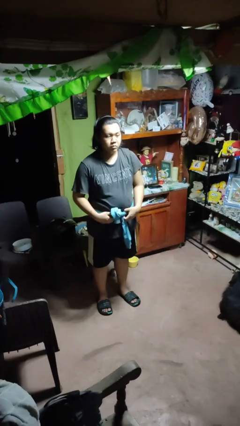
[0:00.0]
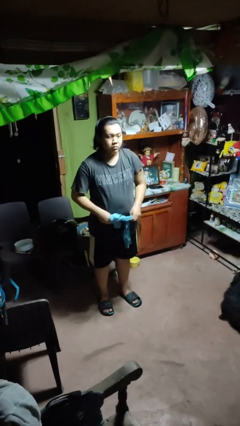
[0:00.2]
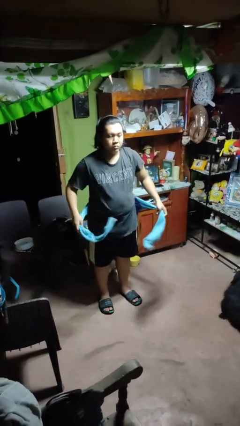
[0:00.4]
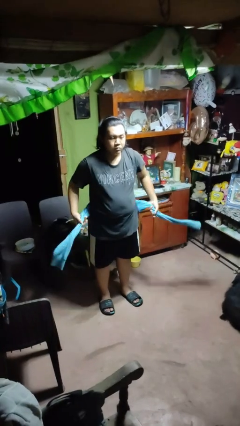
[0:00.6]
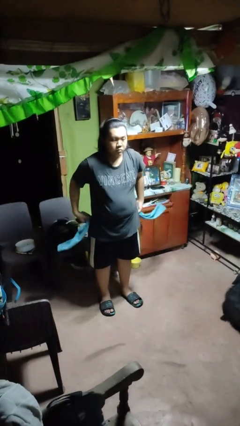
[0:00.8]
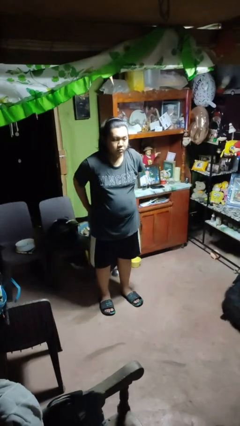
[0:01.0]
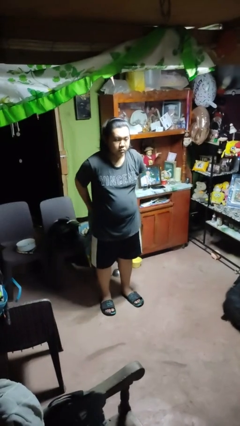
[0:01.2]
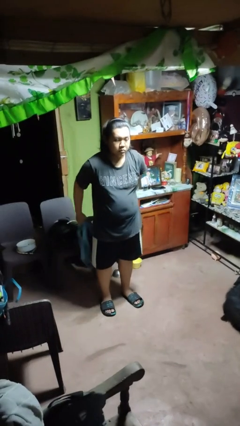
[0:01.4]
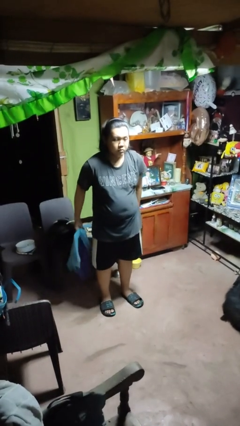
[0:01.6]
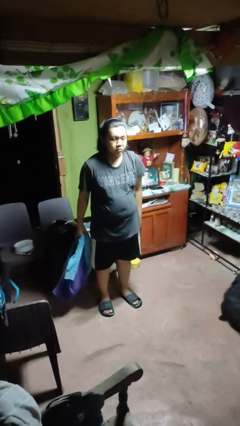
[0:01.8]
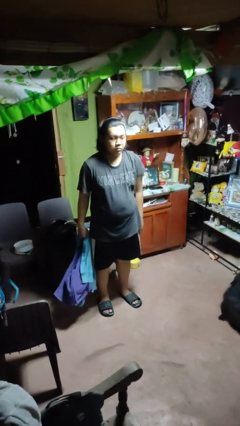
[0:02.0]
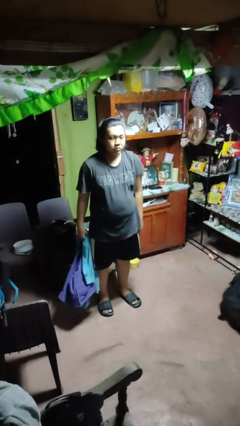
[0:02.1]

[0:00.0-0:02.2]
person unties jacket around waist

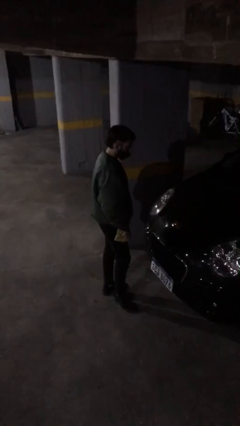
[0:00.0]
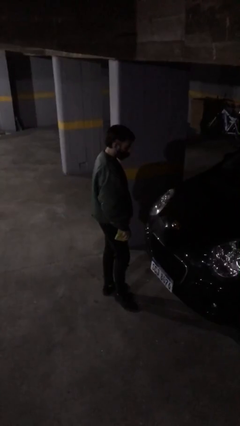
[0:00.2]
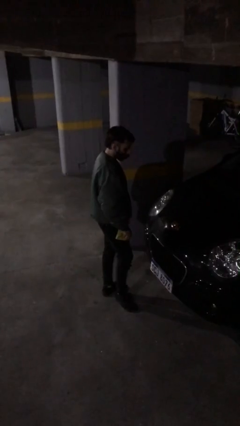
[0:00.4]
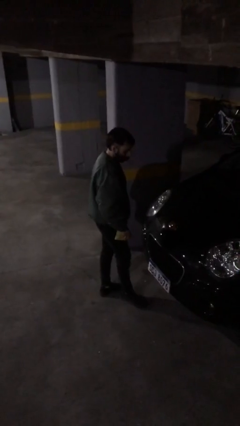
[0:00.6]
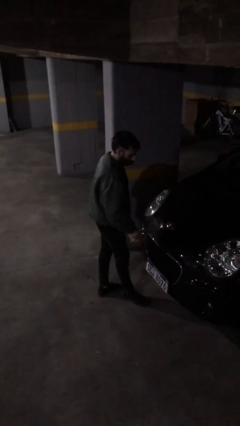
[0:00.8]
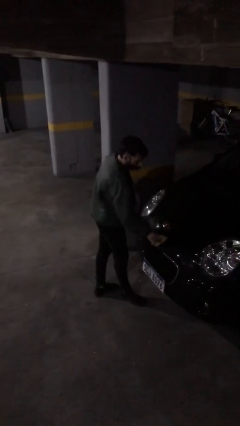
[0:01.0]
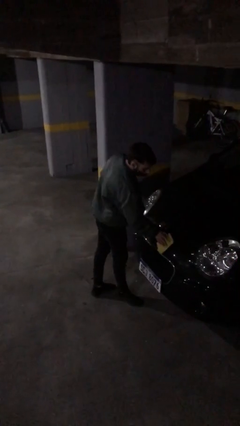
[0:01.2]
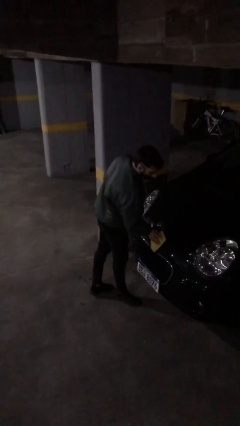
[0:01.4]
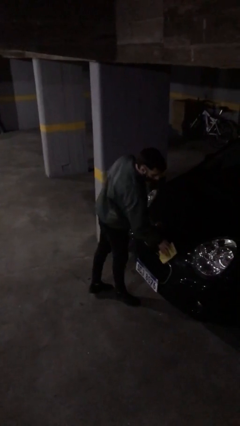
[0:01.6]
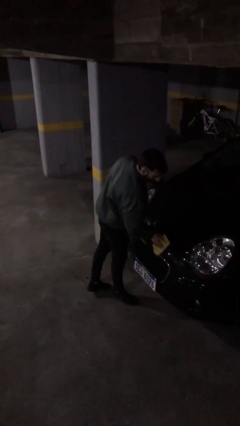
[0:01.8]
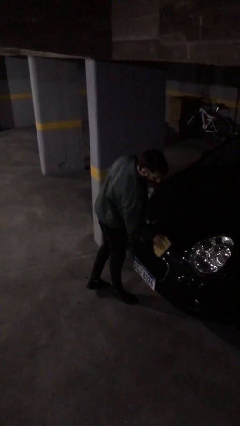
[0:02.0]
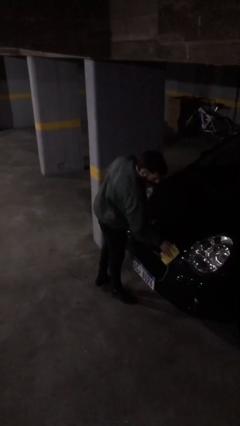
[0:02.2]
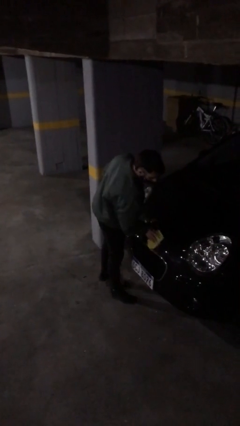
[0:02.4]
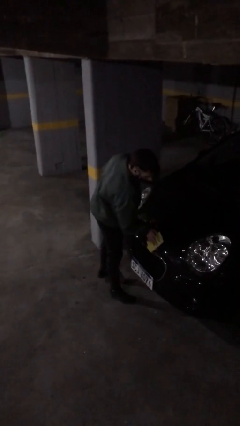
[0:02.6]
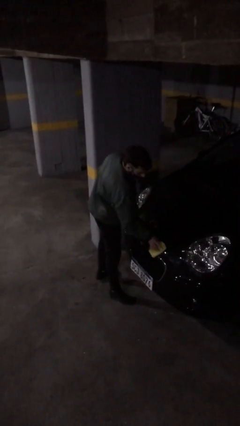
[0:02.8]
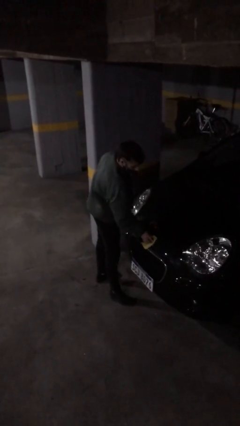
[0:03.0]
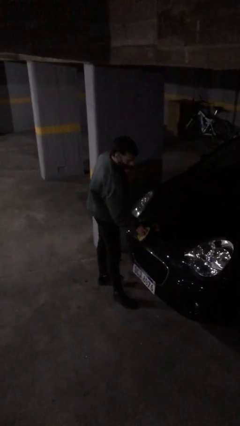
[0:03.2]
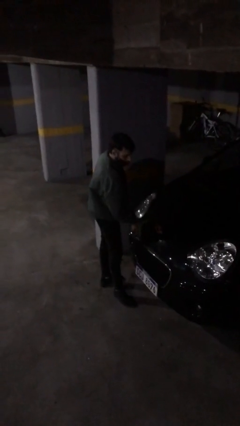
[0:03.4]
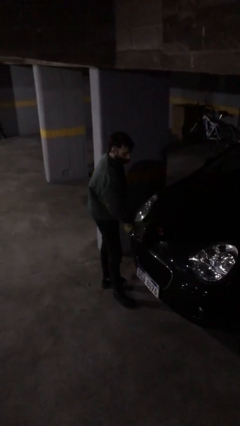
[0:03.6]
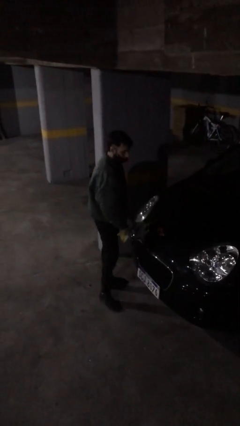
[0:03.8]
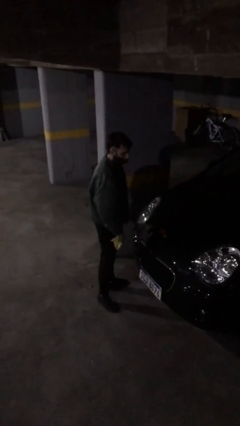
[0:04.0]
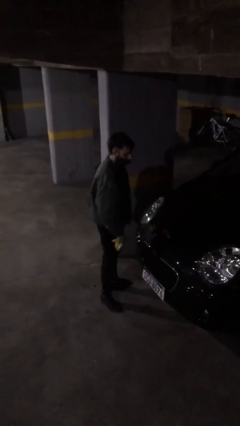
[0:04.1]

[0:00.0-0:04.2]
person polishes car with rag

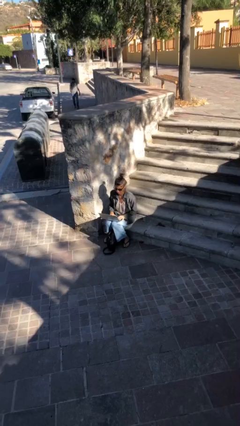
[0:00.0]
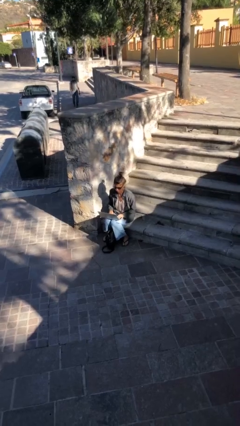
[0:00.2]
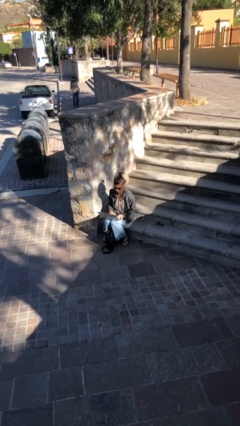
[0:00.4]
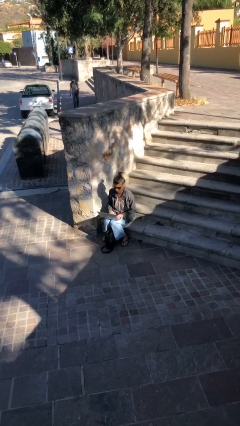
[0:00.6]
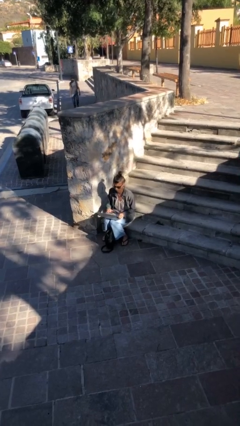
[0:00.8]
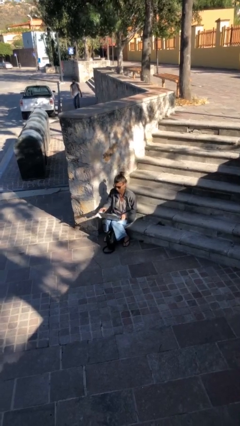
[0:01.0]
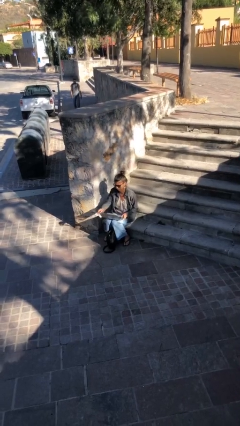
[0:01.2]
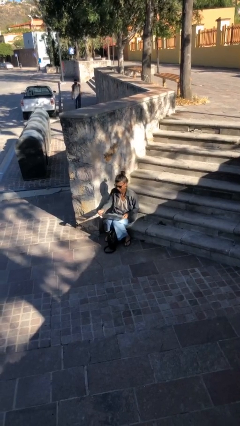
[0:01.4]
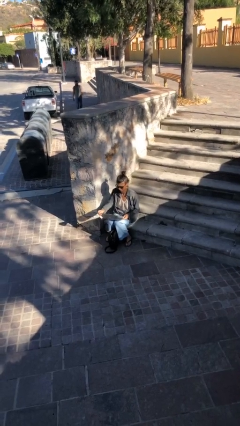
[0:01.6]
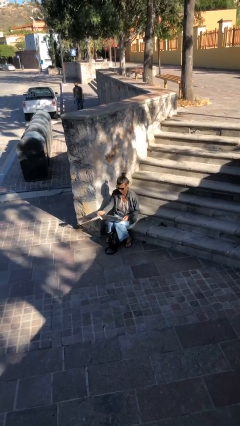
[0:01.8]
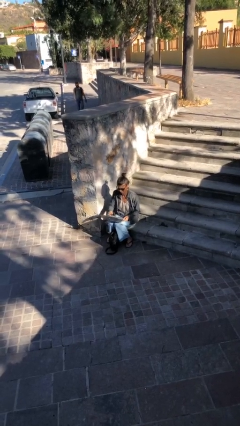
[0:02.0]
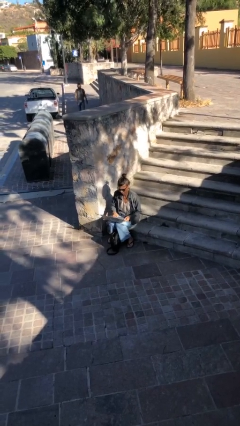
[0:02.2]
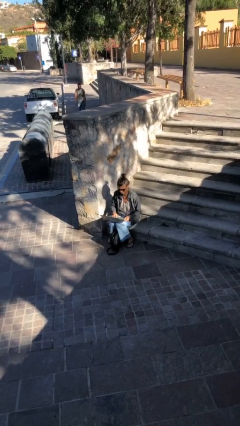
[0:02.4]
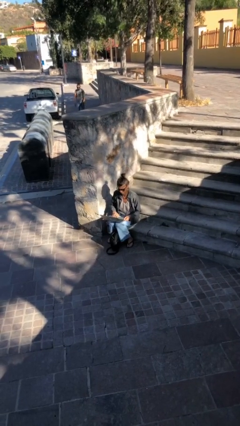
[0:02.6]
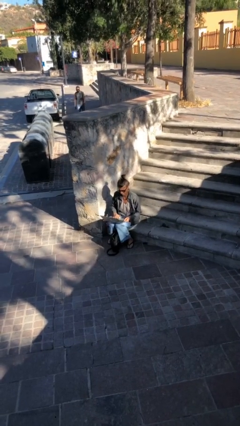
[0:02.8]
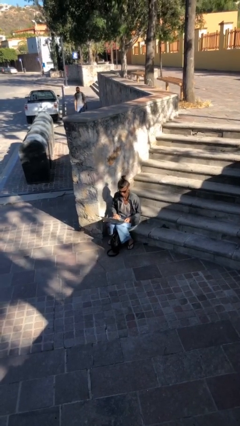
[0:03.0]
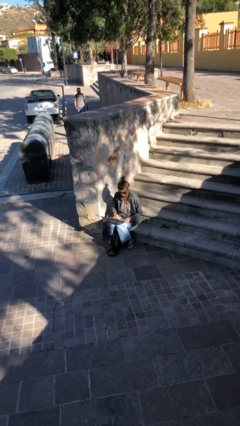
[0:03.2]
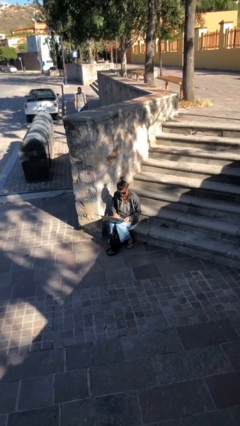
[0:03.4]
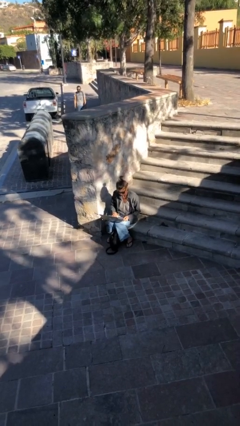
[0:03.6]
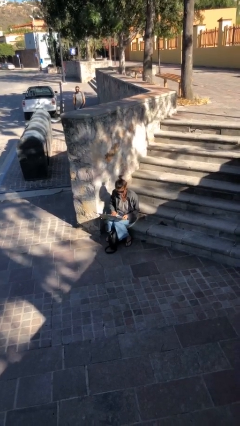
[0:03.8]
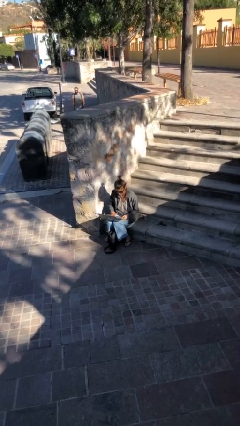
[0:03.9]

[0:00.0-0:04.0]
person interacts with laptop

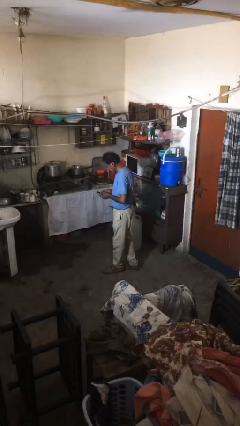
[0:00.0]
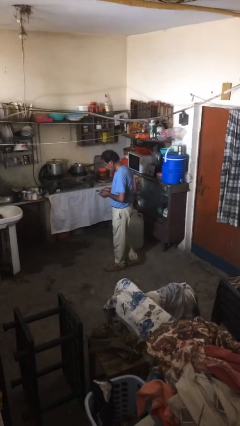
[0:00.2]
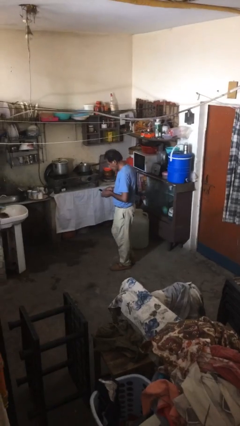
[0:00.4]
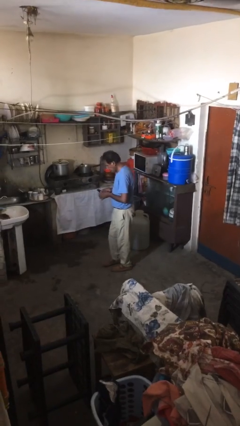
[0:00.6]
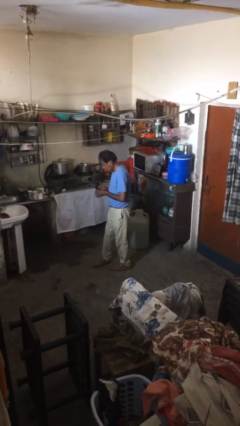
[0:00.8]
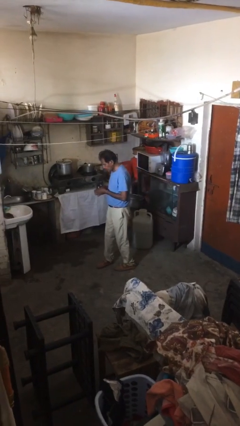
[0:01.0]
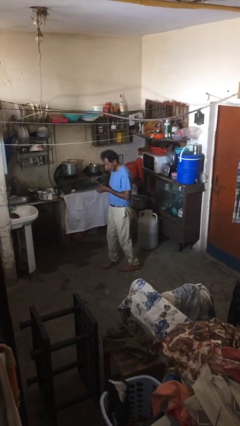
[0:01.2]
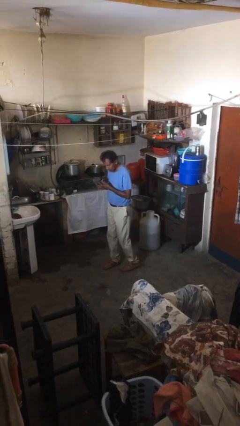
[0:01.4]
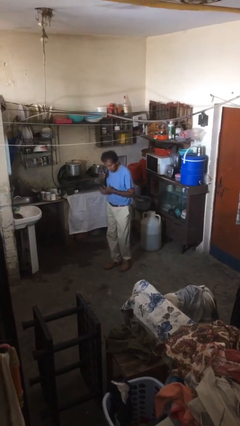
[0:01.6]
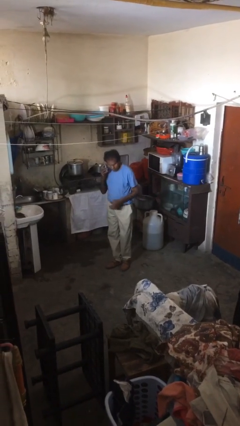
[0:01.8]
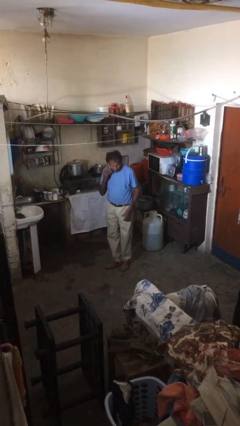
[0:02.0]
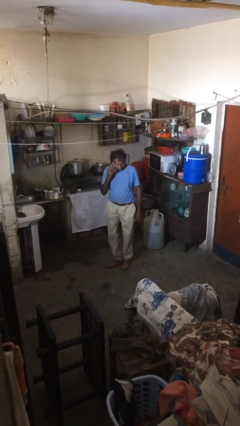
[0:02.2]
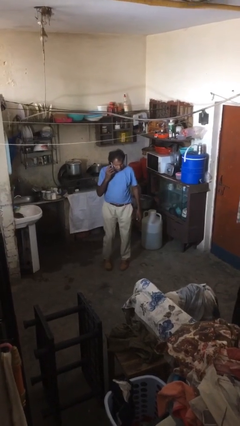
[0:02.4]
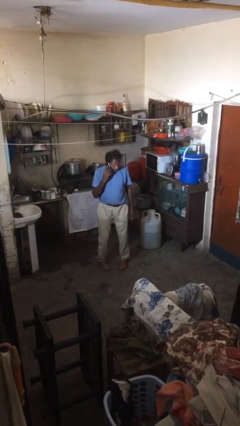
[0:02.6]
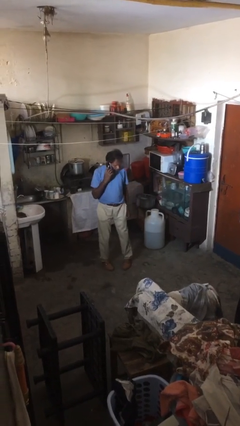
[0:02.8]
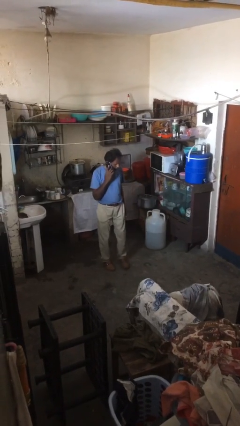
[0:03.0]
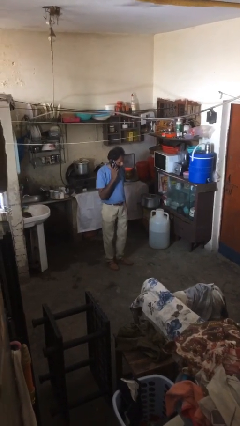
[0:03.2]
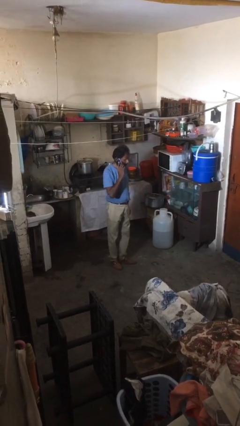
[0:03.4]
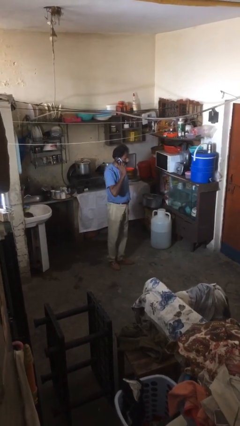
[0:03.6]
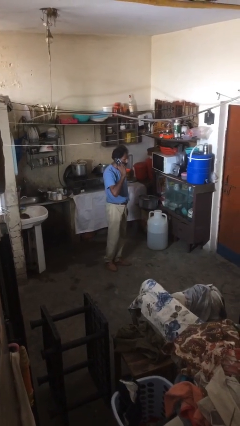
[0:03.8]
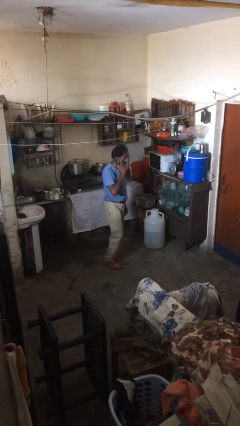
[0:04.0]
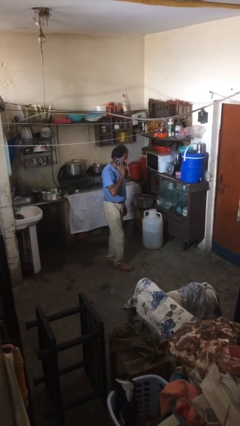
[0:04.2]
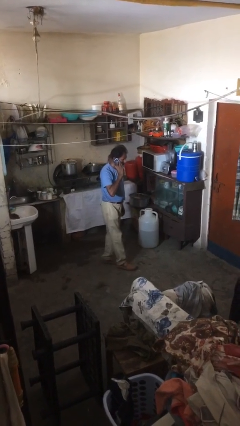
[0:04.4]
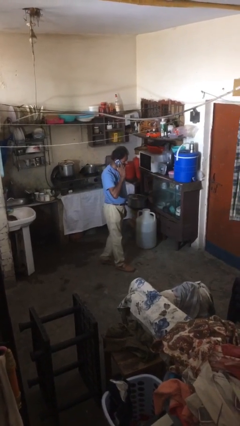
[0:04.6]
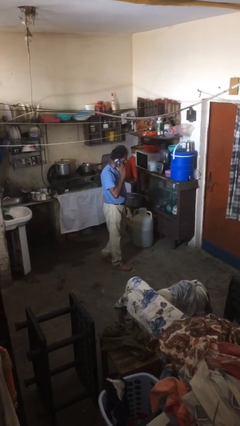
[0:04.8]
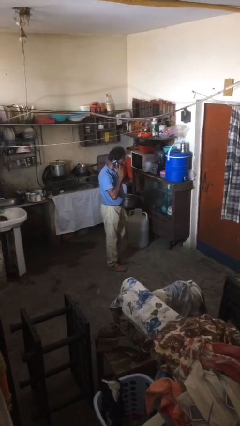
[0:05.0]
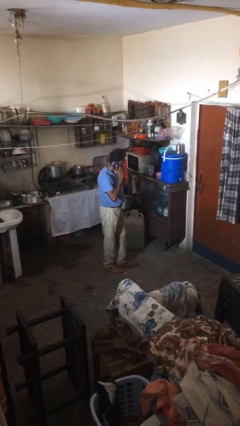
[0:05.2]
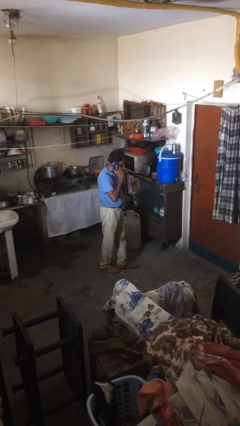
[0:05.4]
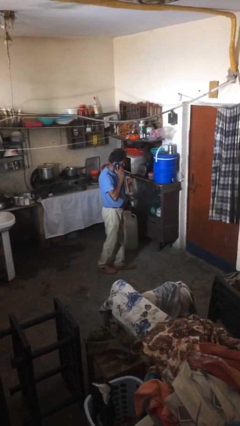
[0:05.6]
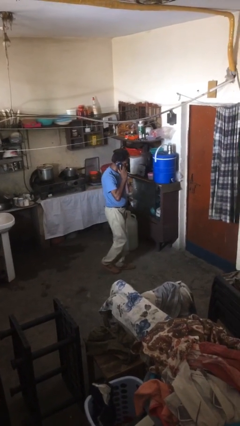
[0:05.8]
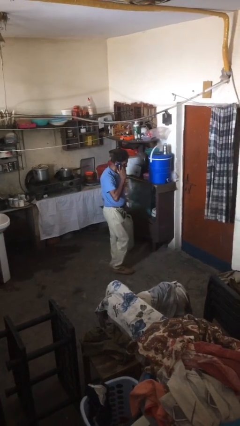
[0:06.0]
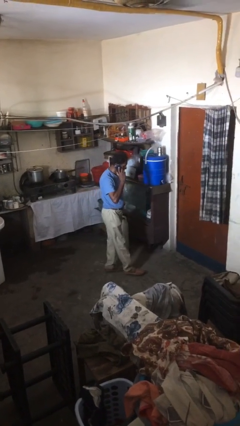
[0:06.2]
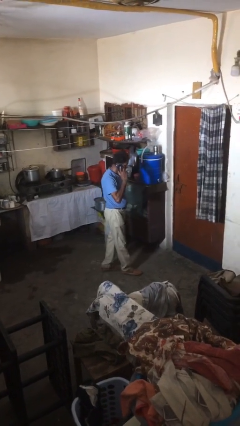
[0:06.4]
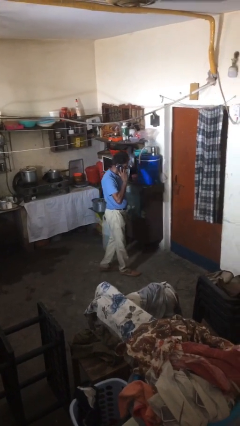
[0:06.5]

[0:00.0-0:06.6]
person talks on phone

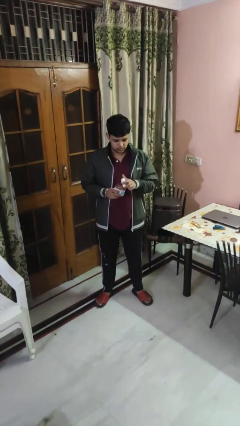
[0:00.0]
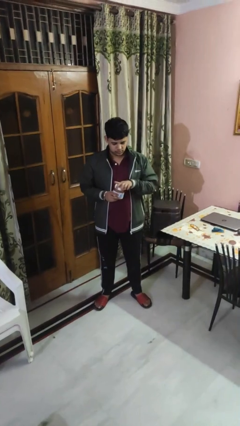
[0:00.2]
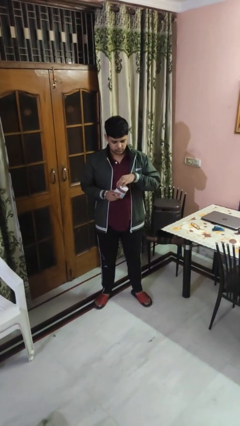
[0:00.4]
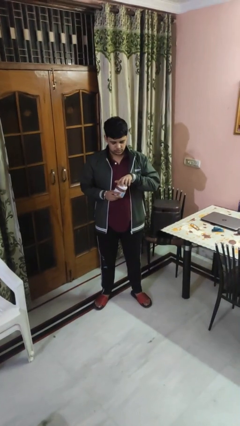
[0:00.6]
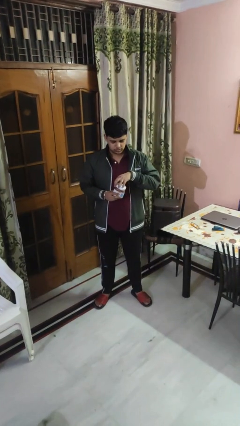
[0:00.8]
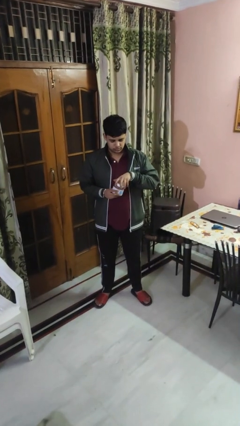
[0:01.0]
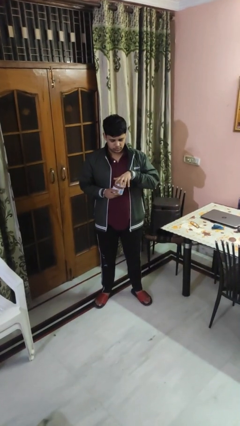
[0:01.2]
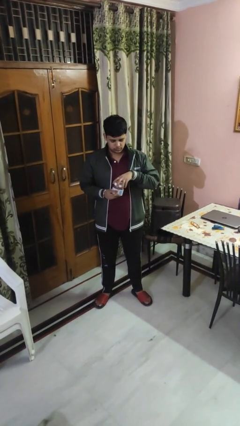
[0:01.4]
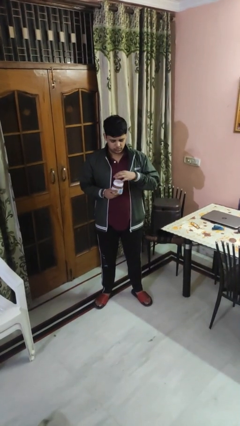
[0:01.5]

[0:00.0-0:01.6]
person closes jar
